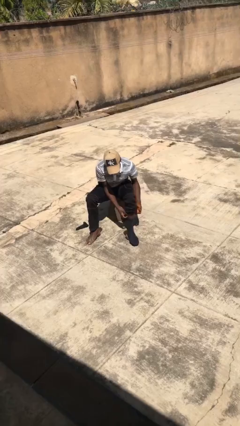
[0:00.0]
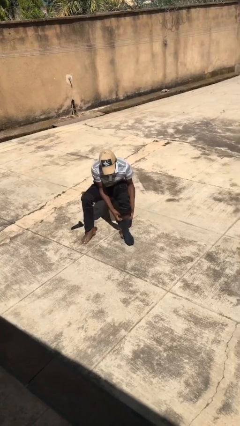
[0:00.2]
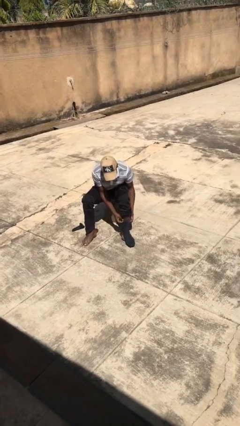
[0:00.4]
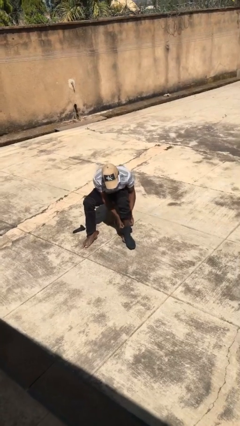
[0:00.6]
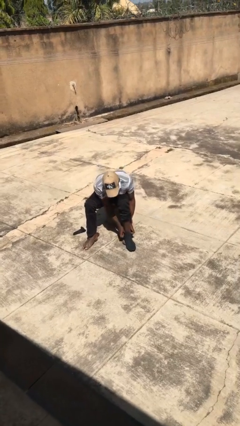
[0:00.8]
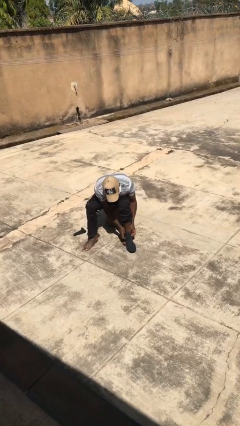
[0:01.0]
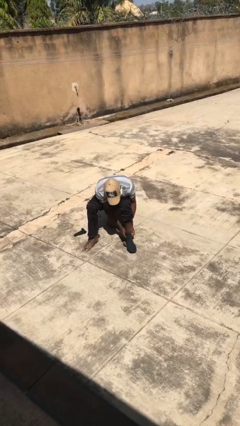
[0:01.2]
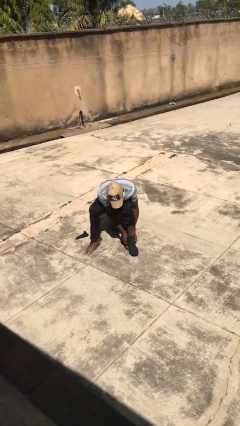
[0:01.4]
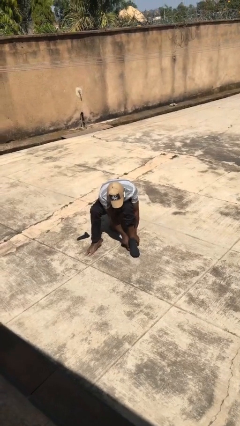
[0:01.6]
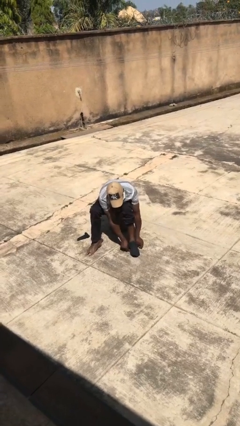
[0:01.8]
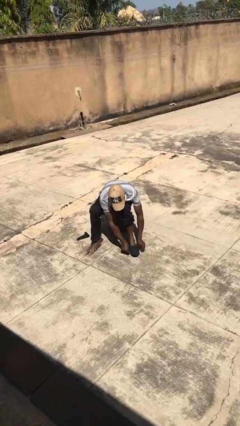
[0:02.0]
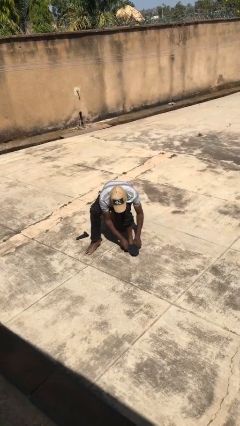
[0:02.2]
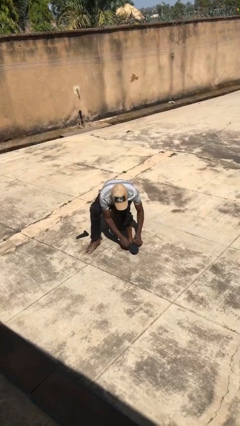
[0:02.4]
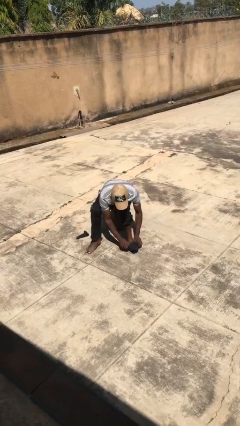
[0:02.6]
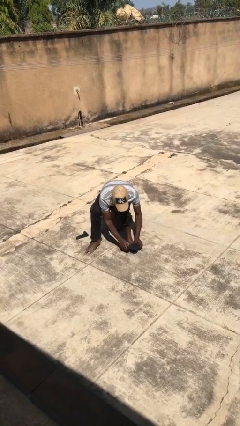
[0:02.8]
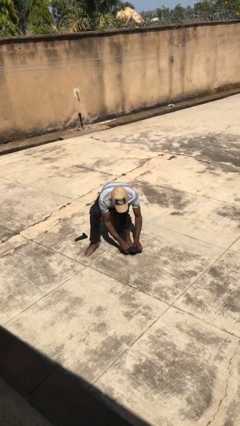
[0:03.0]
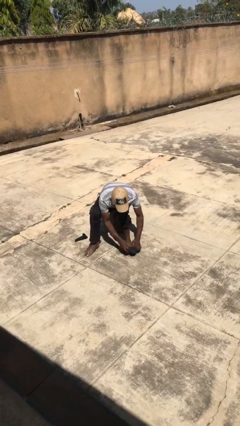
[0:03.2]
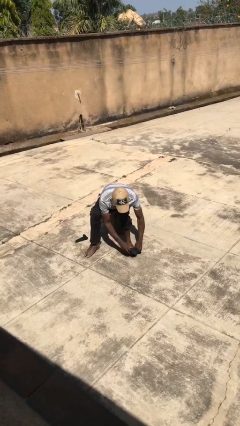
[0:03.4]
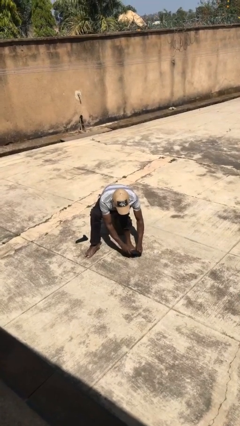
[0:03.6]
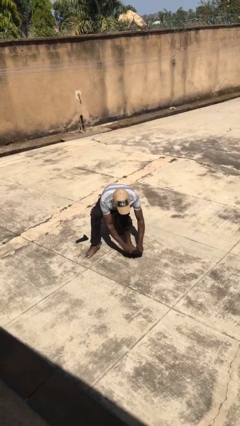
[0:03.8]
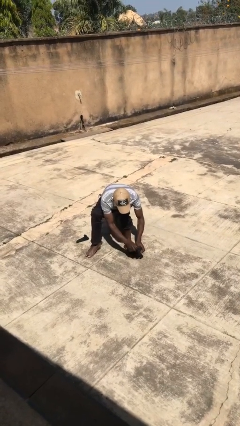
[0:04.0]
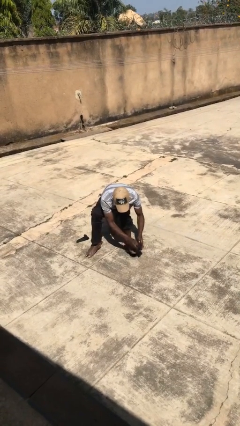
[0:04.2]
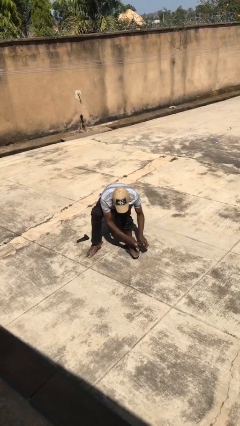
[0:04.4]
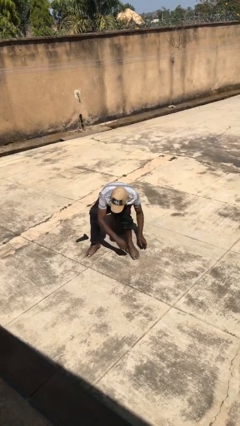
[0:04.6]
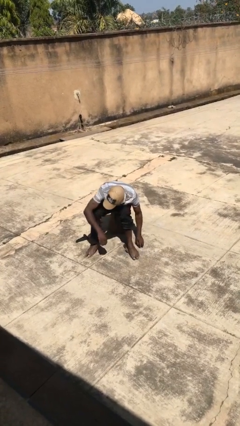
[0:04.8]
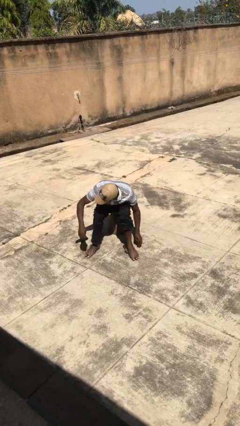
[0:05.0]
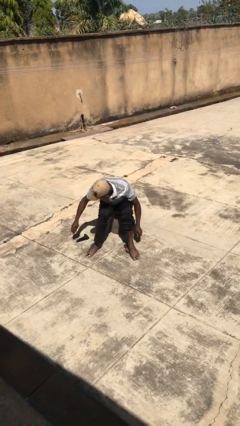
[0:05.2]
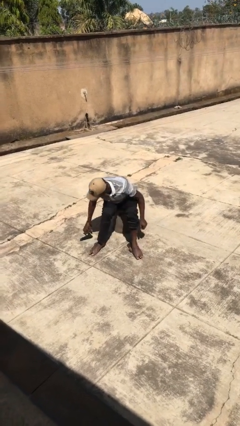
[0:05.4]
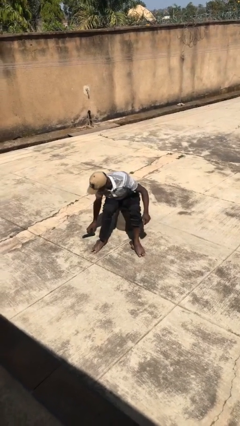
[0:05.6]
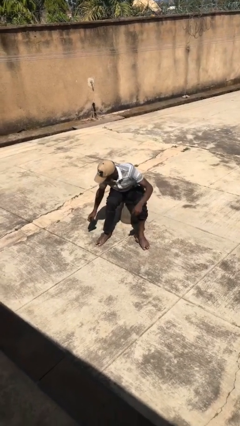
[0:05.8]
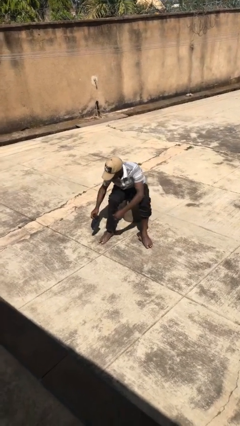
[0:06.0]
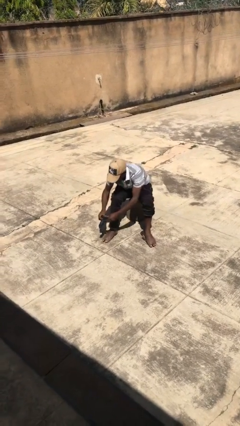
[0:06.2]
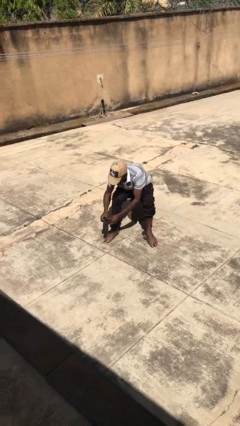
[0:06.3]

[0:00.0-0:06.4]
person takes off socks

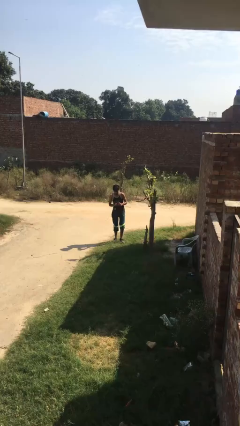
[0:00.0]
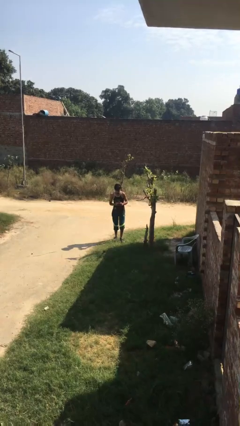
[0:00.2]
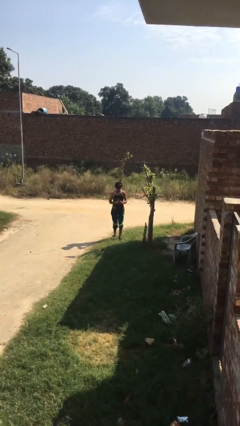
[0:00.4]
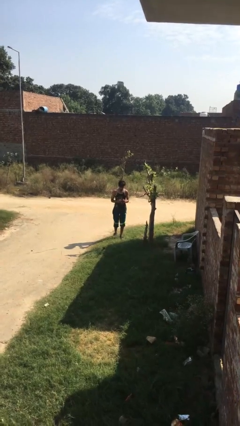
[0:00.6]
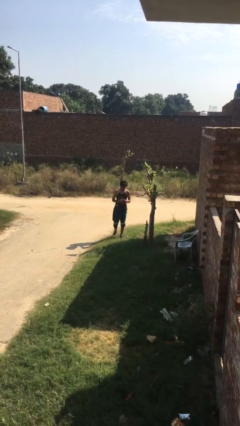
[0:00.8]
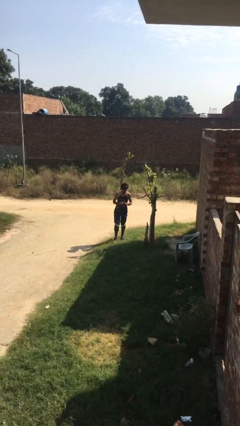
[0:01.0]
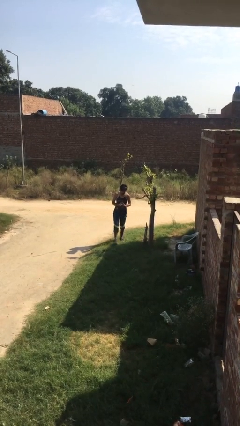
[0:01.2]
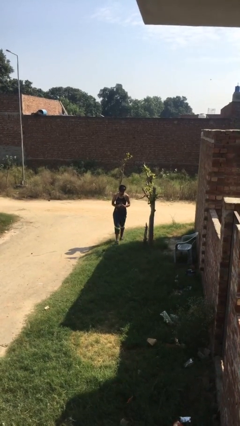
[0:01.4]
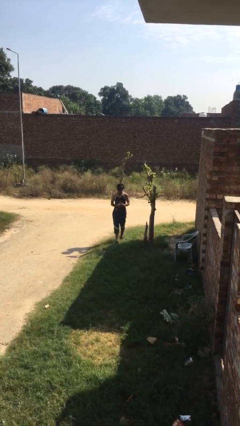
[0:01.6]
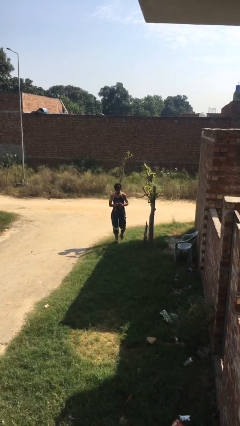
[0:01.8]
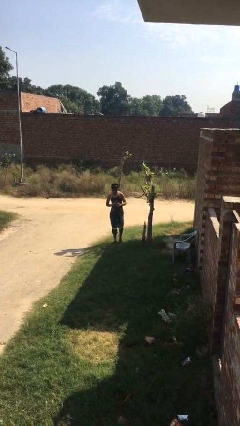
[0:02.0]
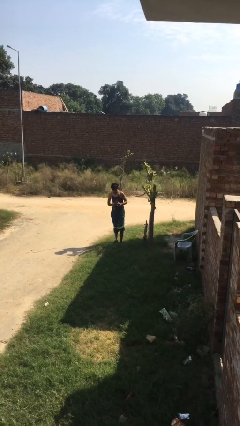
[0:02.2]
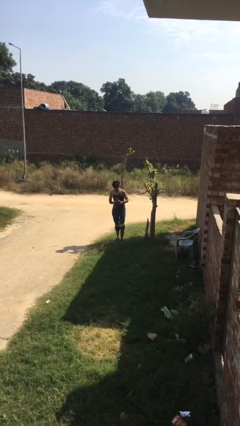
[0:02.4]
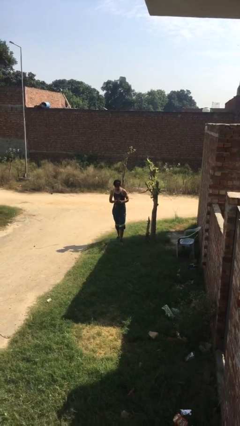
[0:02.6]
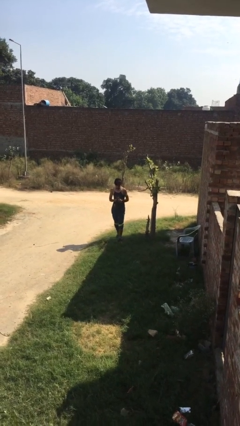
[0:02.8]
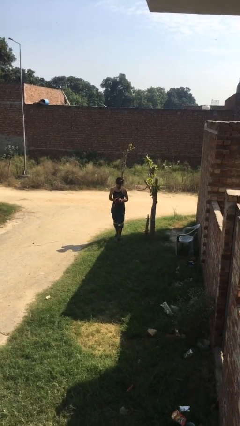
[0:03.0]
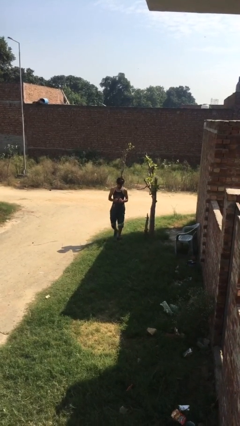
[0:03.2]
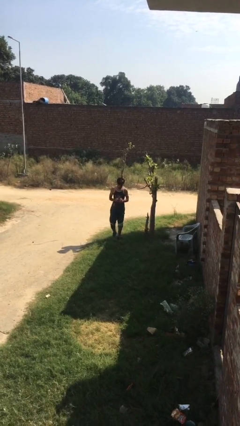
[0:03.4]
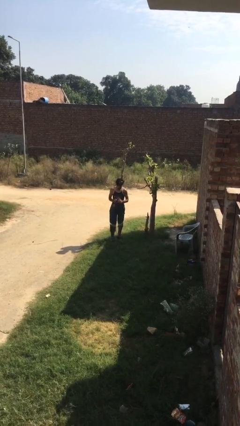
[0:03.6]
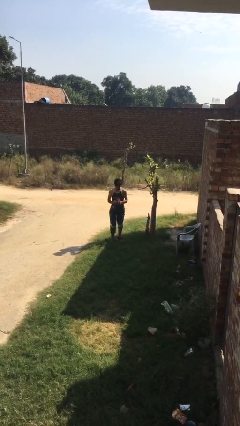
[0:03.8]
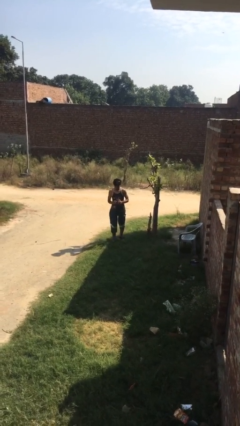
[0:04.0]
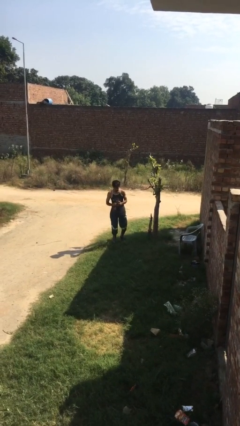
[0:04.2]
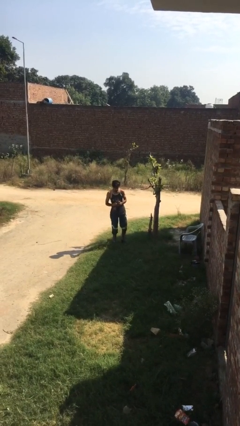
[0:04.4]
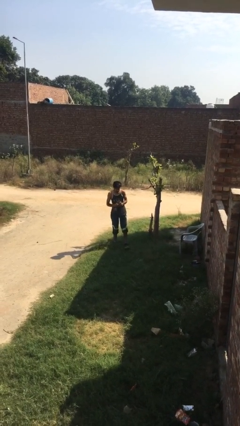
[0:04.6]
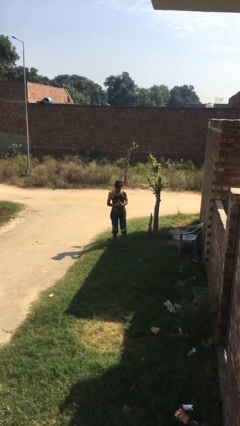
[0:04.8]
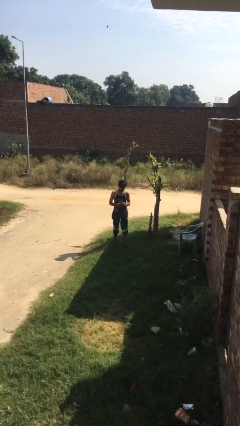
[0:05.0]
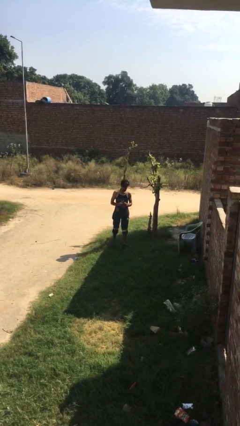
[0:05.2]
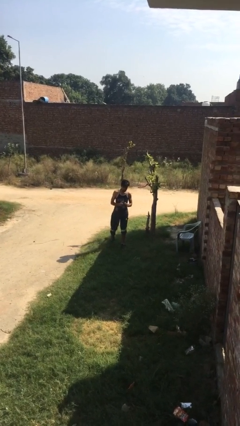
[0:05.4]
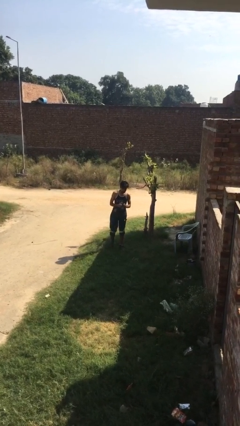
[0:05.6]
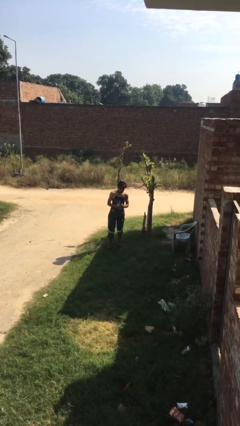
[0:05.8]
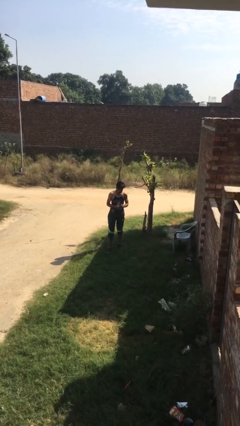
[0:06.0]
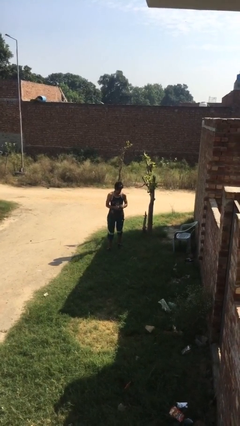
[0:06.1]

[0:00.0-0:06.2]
person texts on phone

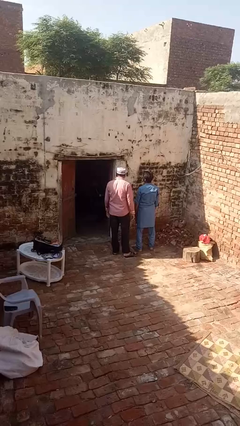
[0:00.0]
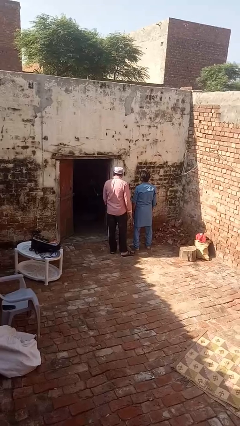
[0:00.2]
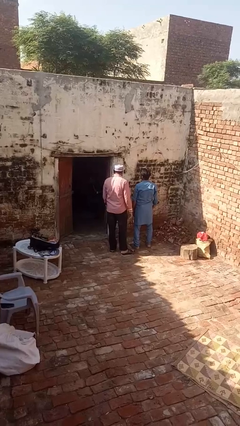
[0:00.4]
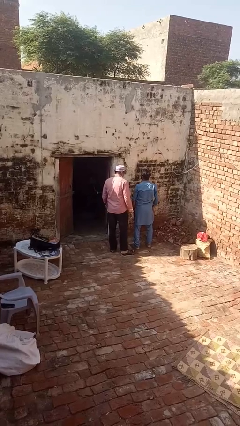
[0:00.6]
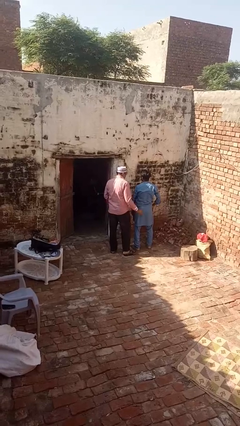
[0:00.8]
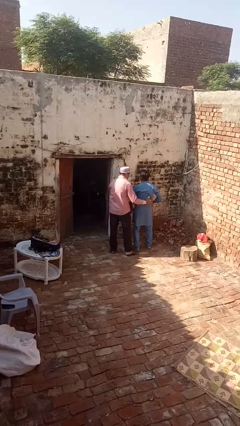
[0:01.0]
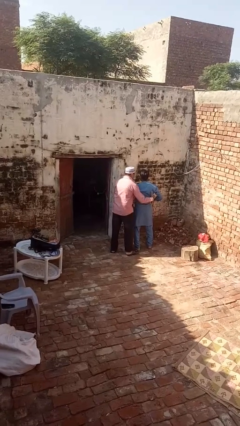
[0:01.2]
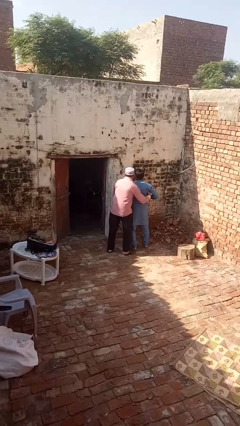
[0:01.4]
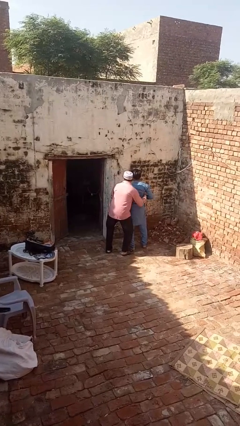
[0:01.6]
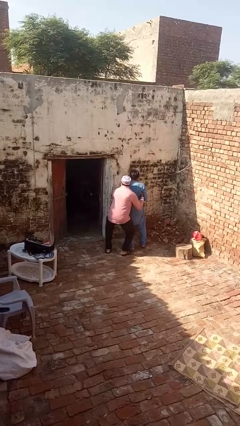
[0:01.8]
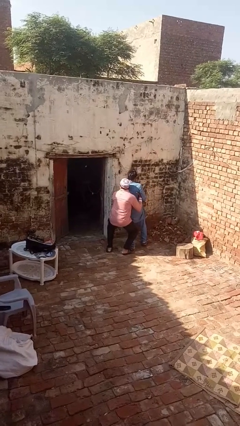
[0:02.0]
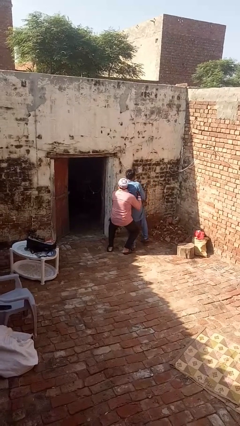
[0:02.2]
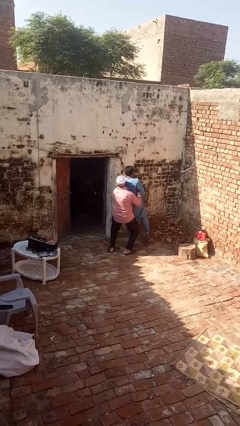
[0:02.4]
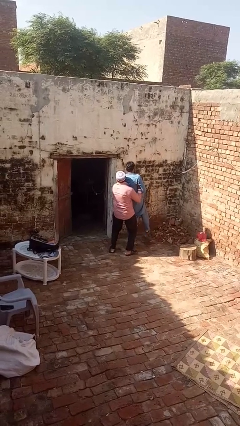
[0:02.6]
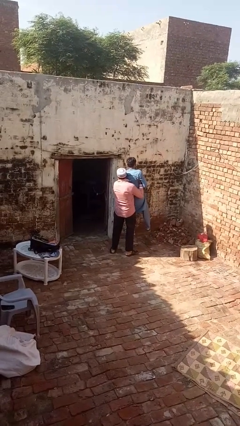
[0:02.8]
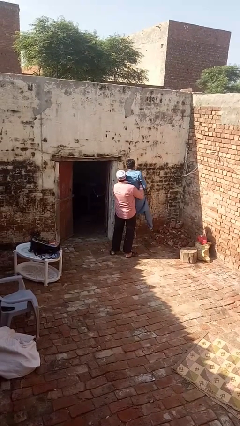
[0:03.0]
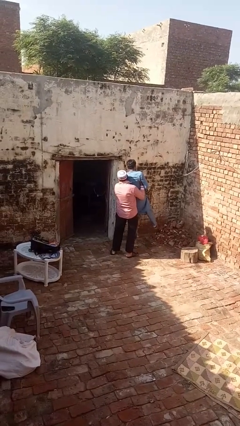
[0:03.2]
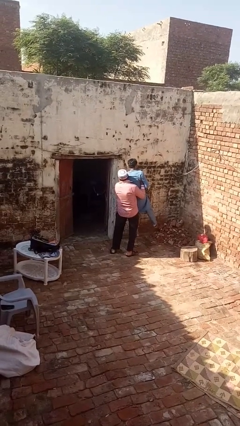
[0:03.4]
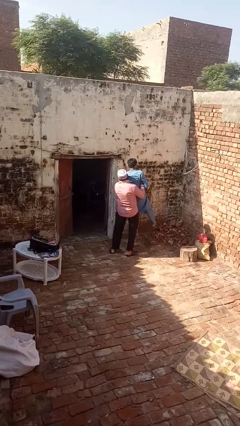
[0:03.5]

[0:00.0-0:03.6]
person picks up person

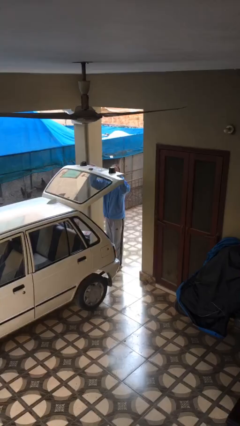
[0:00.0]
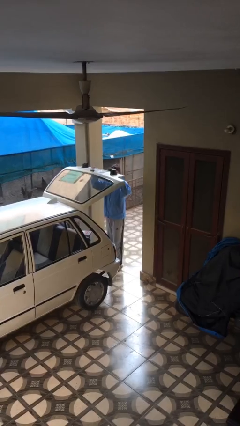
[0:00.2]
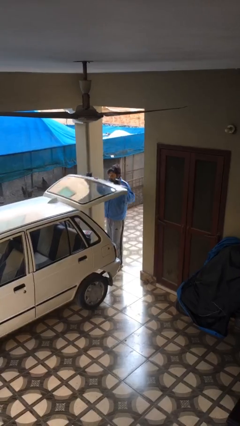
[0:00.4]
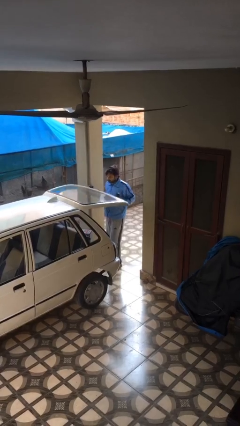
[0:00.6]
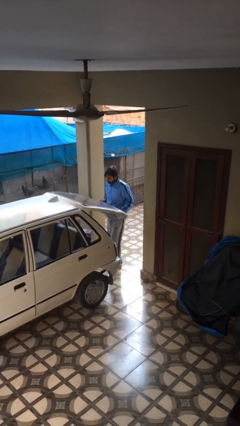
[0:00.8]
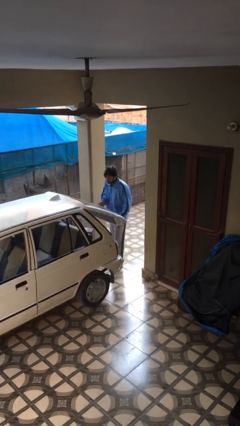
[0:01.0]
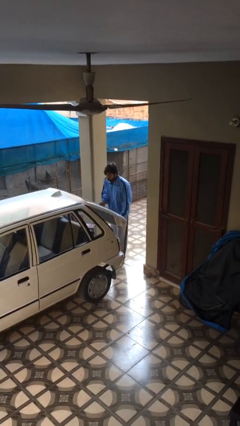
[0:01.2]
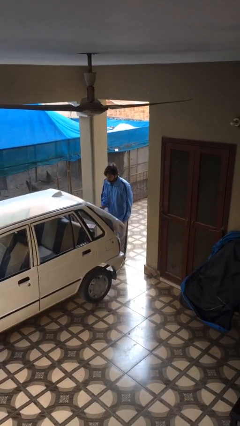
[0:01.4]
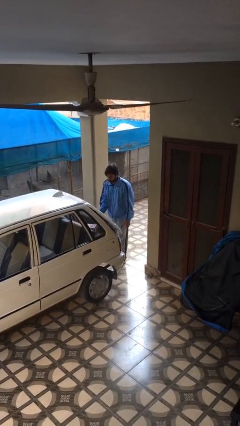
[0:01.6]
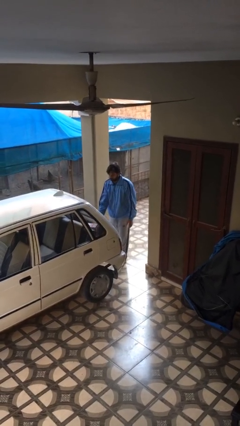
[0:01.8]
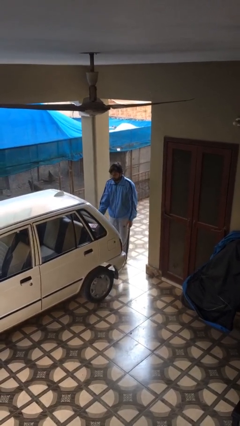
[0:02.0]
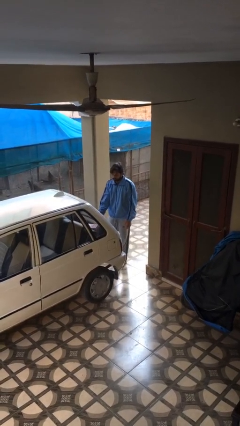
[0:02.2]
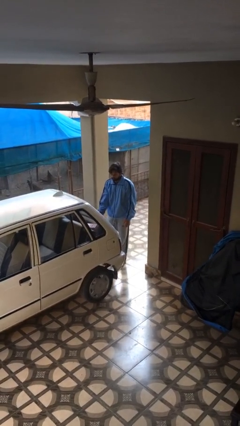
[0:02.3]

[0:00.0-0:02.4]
person closes car trunk
